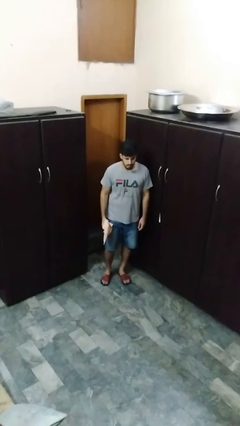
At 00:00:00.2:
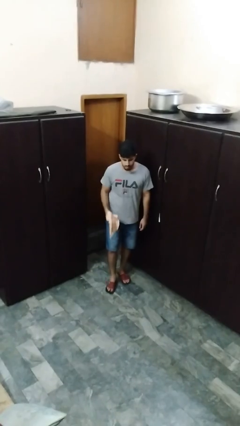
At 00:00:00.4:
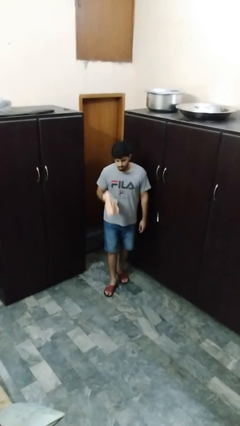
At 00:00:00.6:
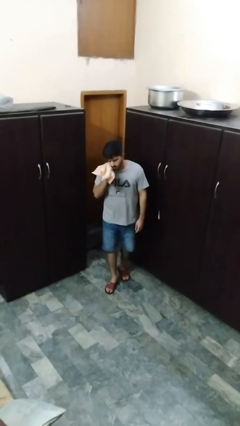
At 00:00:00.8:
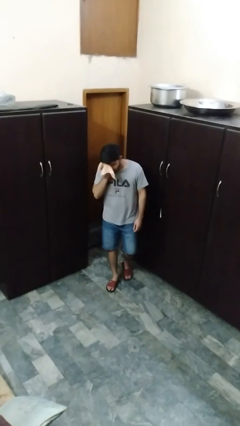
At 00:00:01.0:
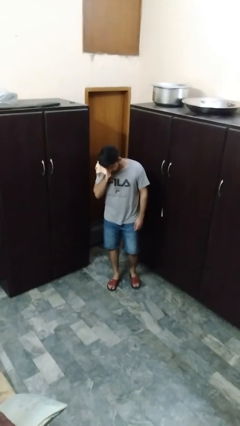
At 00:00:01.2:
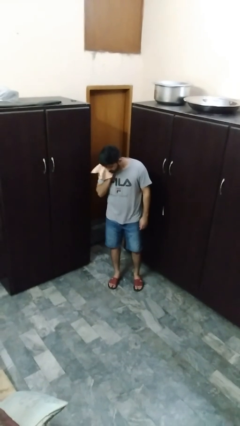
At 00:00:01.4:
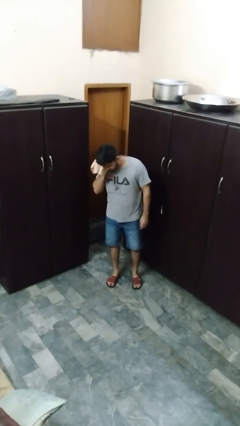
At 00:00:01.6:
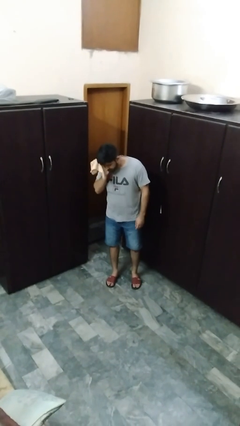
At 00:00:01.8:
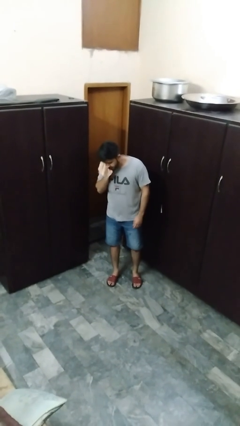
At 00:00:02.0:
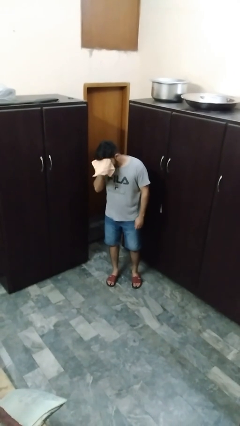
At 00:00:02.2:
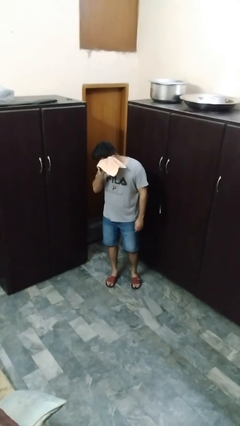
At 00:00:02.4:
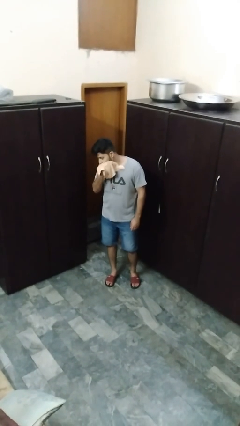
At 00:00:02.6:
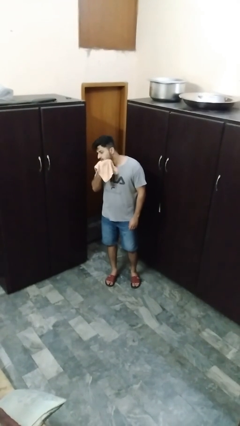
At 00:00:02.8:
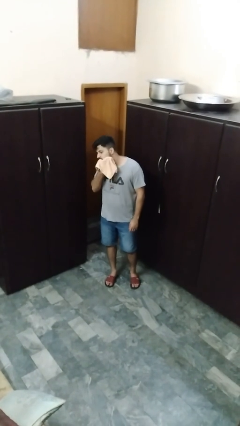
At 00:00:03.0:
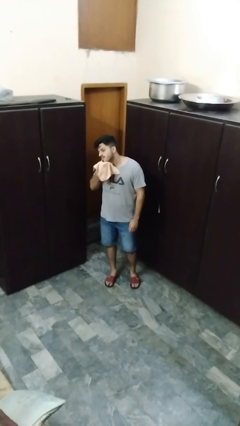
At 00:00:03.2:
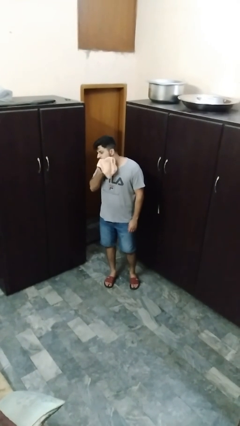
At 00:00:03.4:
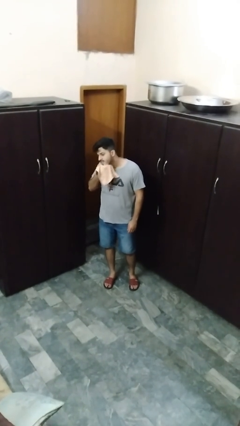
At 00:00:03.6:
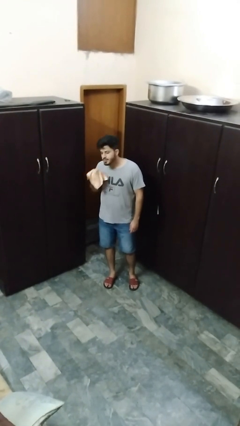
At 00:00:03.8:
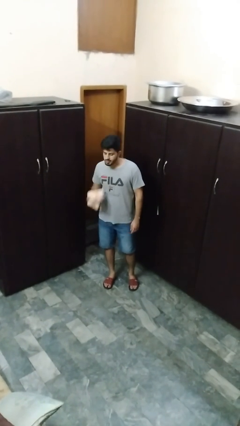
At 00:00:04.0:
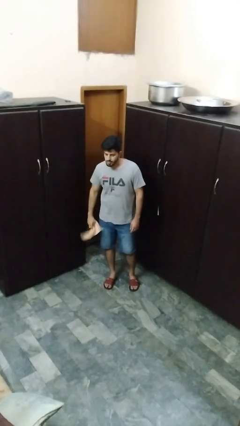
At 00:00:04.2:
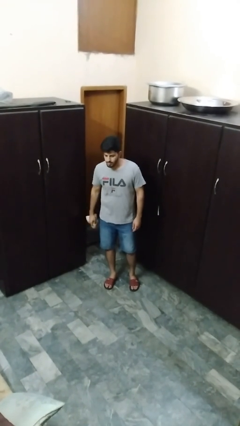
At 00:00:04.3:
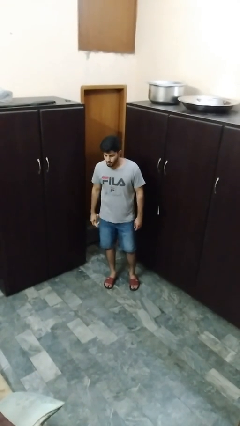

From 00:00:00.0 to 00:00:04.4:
person wipes mouth with napkin

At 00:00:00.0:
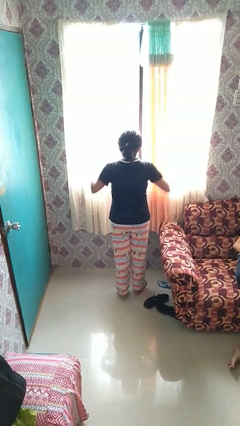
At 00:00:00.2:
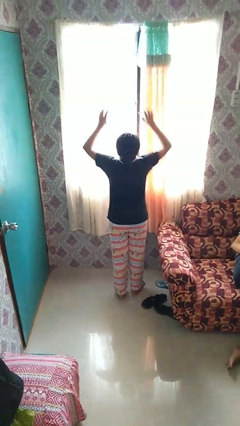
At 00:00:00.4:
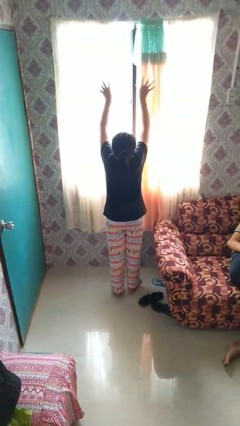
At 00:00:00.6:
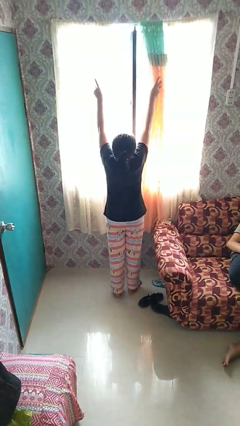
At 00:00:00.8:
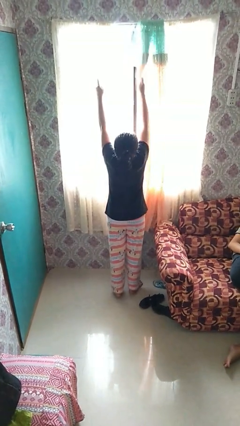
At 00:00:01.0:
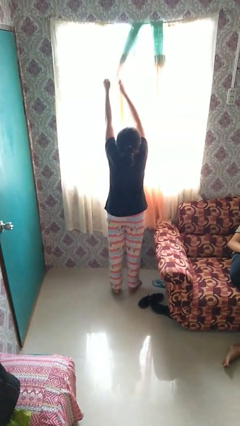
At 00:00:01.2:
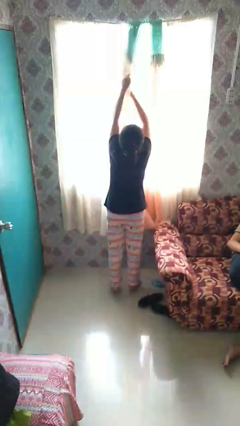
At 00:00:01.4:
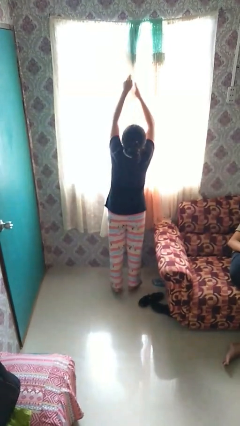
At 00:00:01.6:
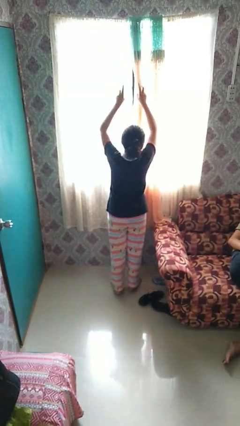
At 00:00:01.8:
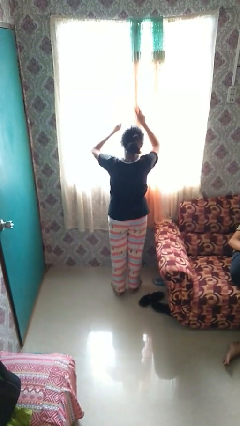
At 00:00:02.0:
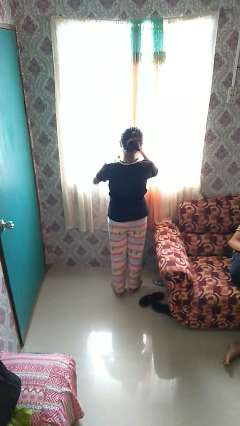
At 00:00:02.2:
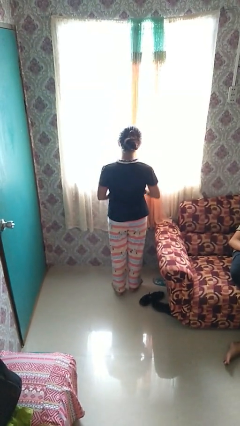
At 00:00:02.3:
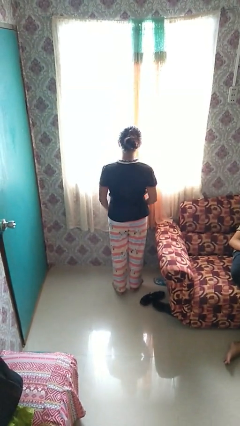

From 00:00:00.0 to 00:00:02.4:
person closes curtains

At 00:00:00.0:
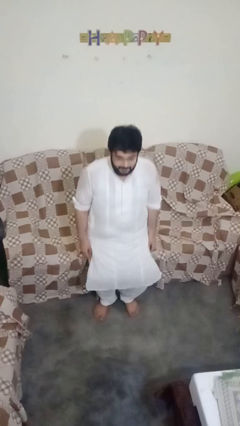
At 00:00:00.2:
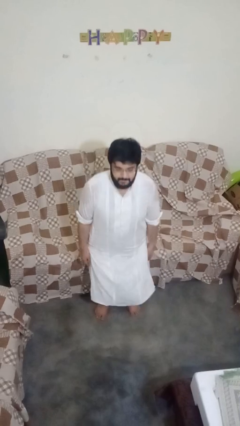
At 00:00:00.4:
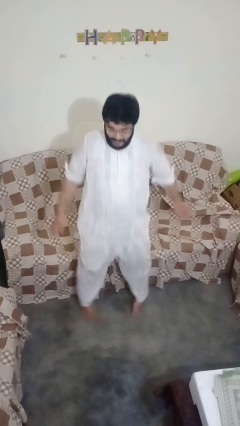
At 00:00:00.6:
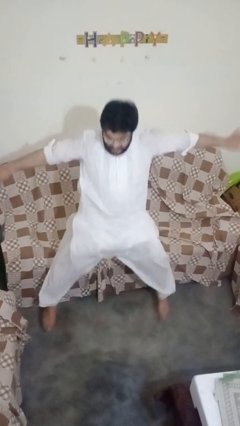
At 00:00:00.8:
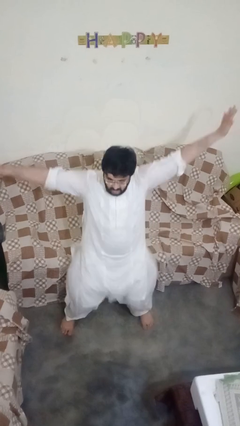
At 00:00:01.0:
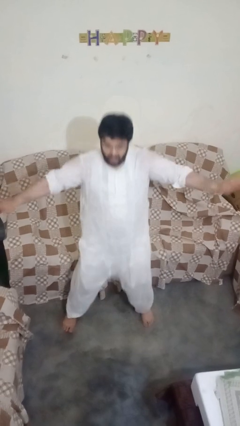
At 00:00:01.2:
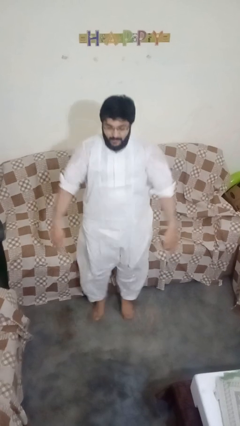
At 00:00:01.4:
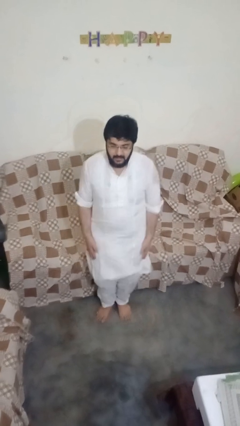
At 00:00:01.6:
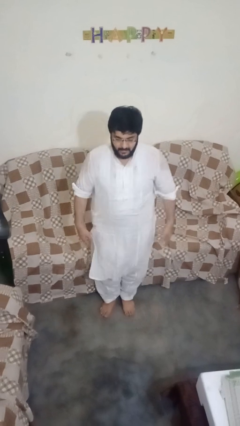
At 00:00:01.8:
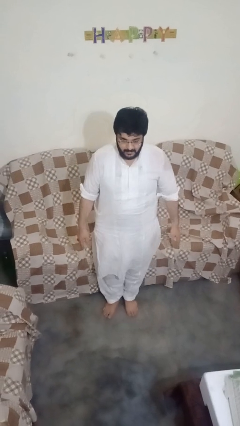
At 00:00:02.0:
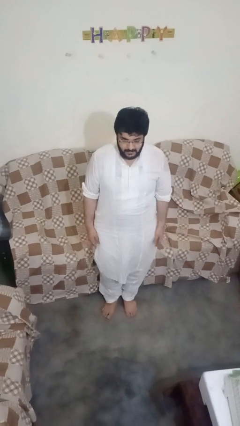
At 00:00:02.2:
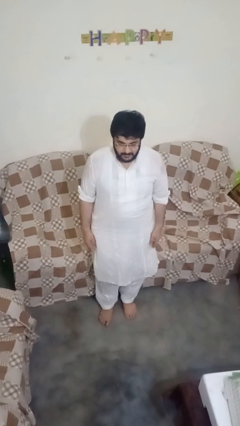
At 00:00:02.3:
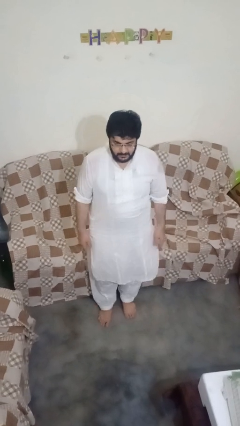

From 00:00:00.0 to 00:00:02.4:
person exercises with jumping jacks

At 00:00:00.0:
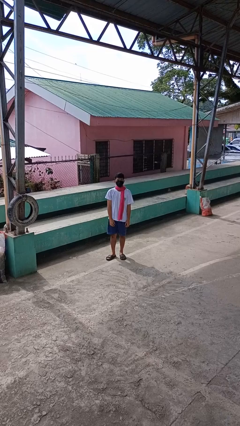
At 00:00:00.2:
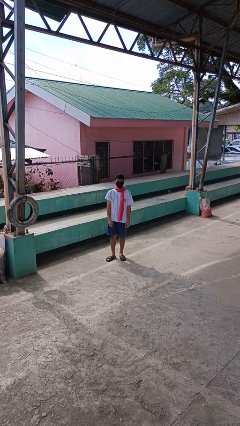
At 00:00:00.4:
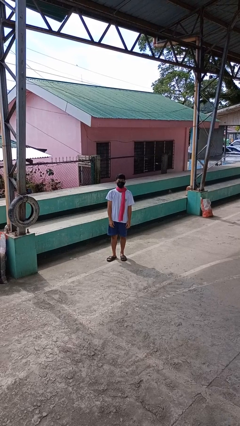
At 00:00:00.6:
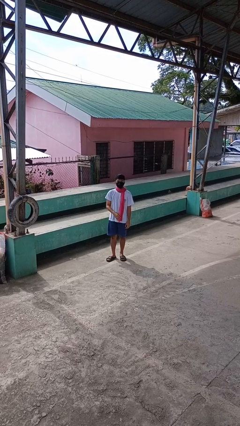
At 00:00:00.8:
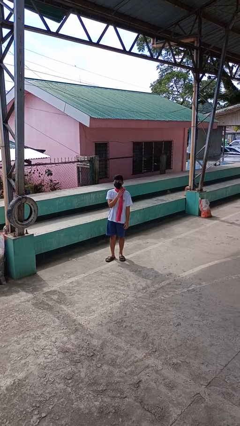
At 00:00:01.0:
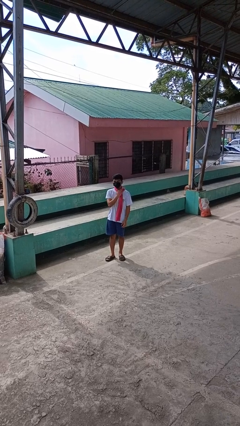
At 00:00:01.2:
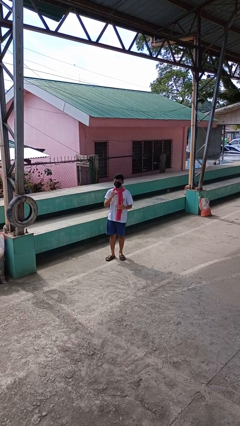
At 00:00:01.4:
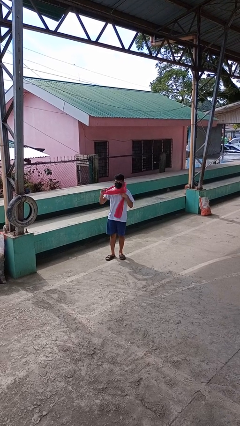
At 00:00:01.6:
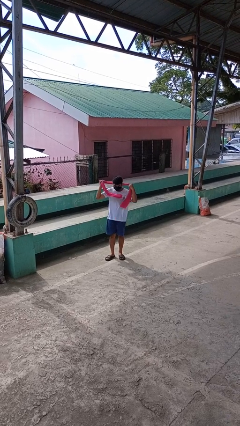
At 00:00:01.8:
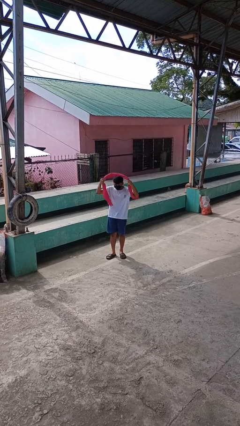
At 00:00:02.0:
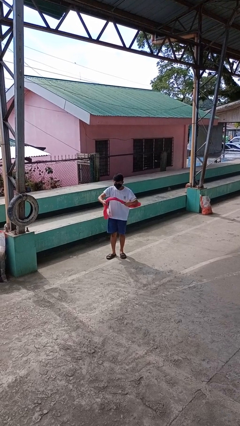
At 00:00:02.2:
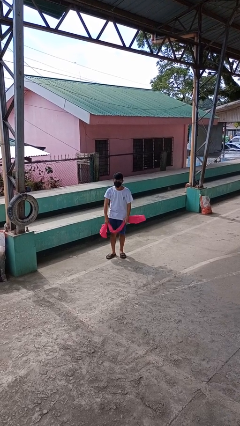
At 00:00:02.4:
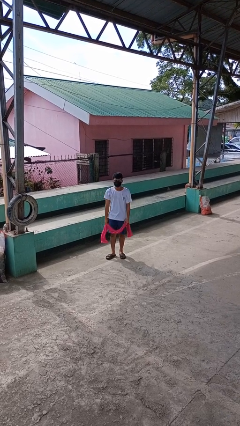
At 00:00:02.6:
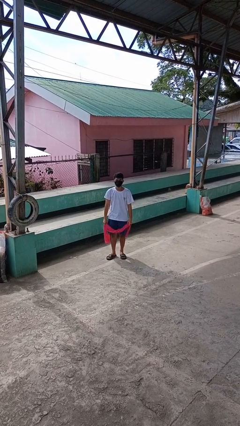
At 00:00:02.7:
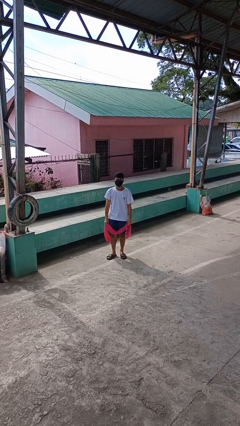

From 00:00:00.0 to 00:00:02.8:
person takes off scarf

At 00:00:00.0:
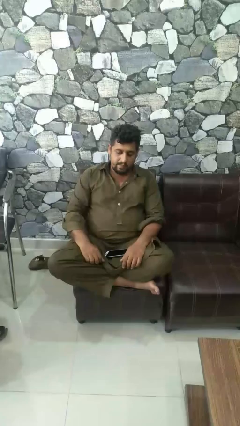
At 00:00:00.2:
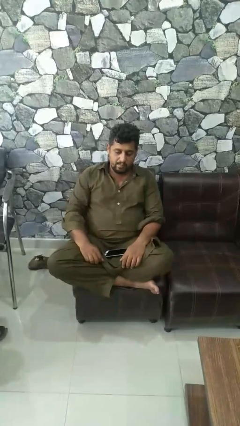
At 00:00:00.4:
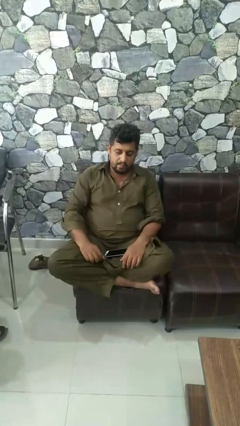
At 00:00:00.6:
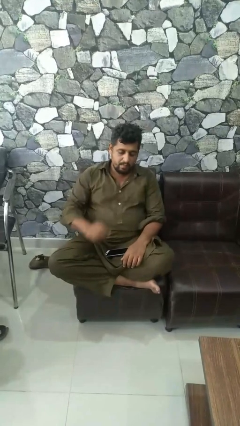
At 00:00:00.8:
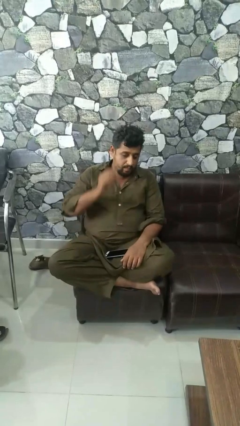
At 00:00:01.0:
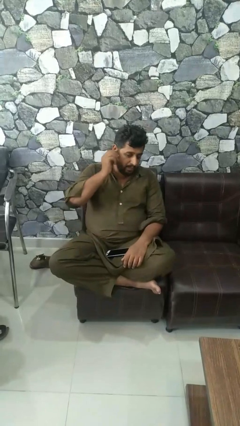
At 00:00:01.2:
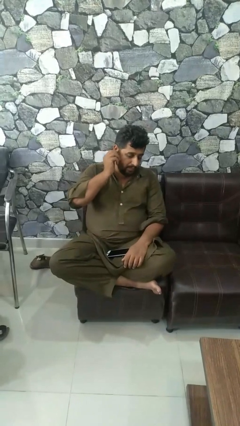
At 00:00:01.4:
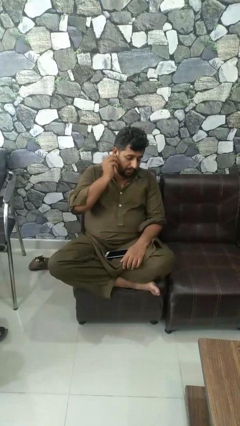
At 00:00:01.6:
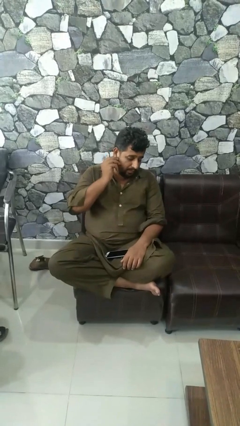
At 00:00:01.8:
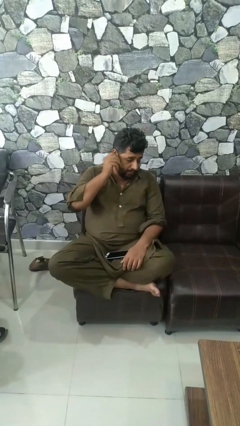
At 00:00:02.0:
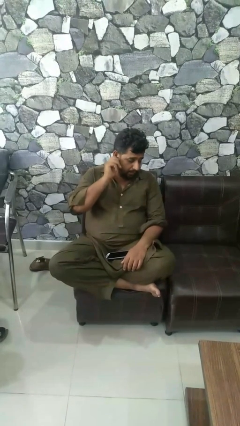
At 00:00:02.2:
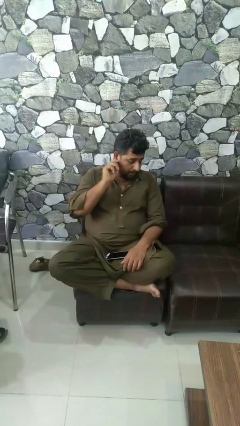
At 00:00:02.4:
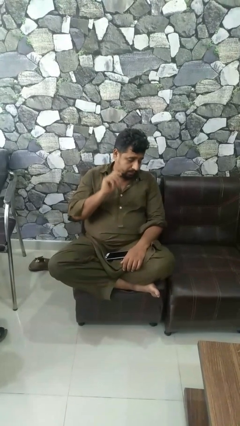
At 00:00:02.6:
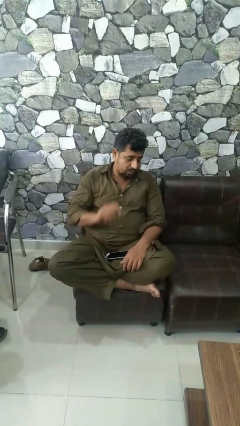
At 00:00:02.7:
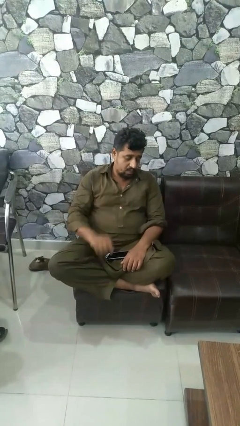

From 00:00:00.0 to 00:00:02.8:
person touches earlobe

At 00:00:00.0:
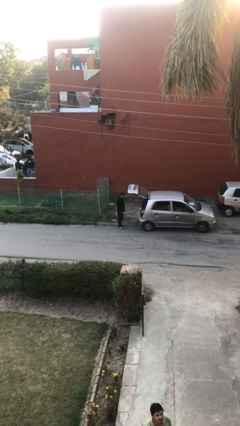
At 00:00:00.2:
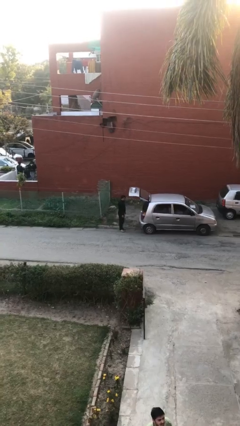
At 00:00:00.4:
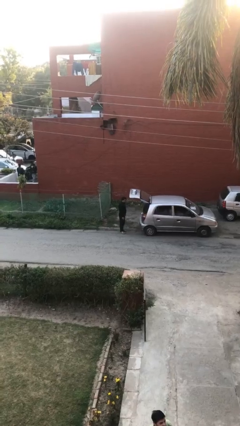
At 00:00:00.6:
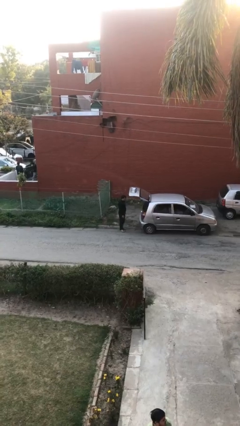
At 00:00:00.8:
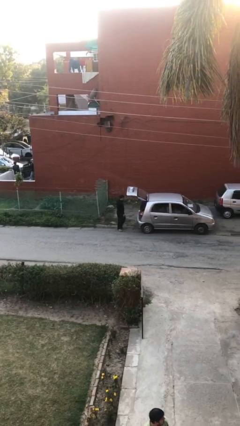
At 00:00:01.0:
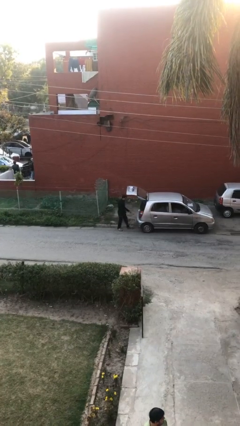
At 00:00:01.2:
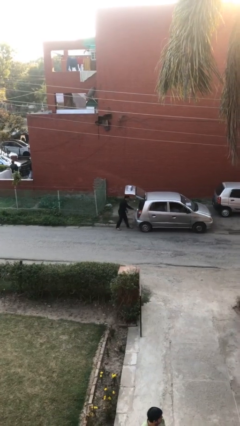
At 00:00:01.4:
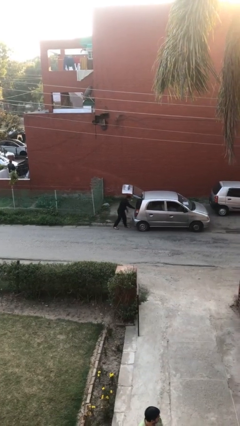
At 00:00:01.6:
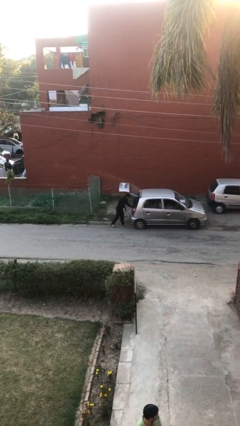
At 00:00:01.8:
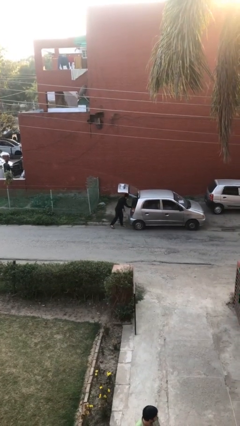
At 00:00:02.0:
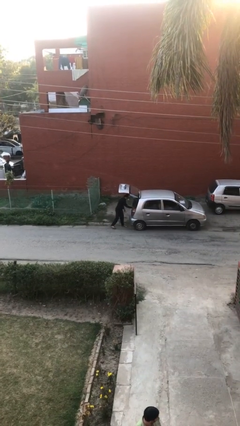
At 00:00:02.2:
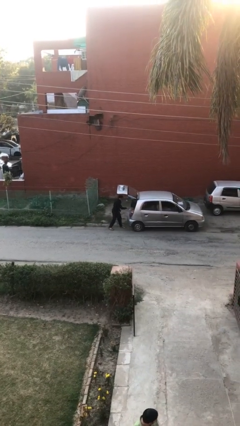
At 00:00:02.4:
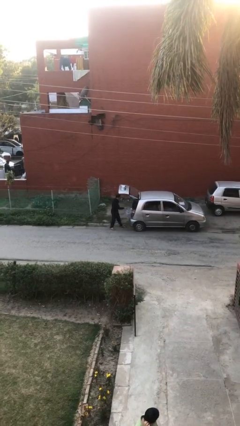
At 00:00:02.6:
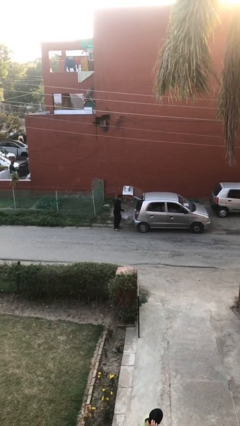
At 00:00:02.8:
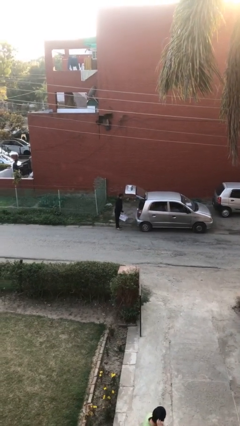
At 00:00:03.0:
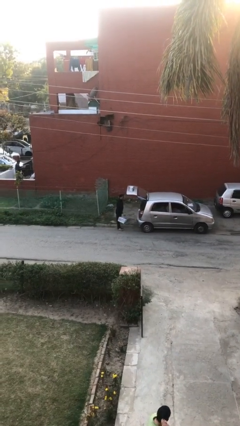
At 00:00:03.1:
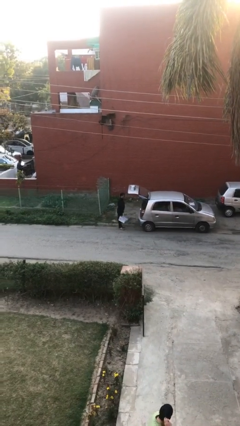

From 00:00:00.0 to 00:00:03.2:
person unloads car
